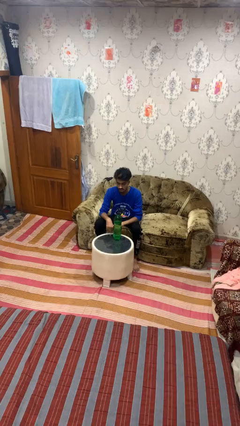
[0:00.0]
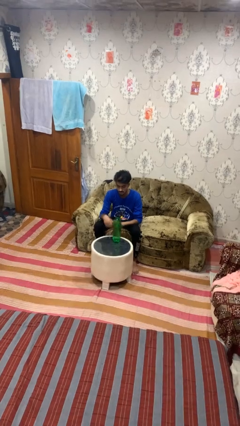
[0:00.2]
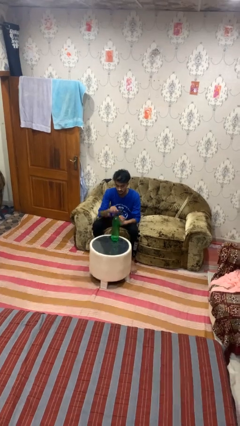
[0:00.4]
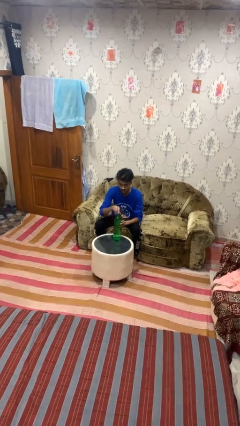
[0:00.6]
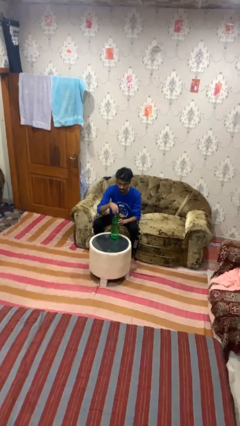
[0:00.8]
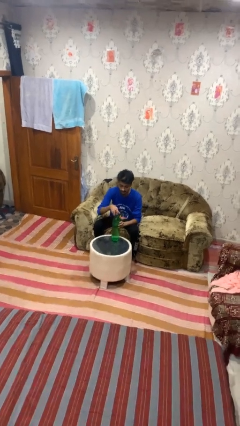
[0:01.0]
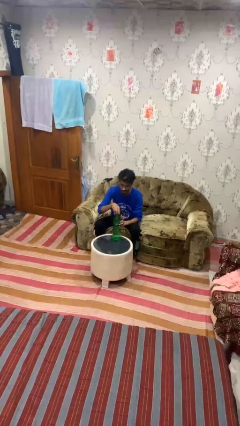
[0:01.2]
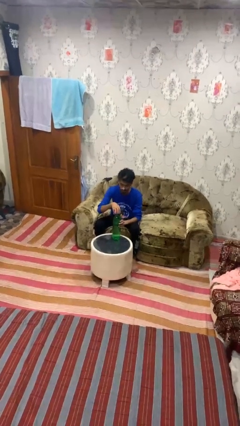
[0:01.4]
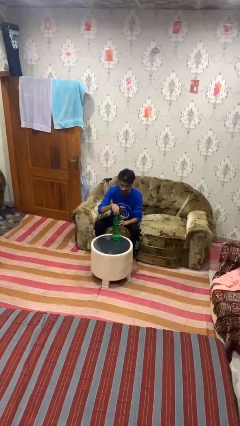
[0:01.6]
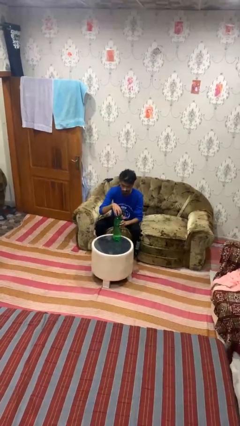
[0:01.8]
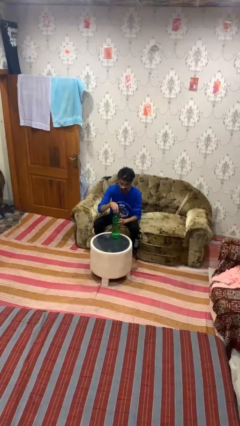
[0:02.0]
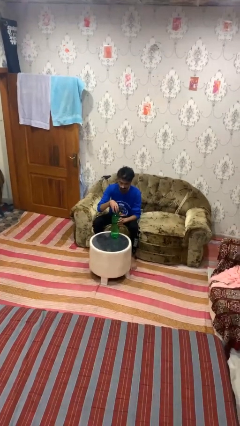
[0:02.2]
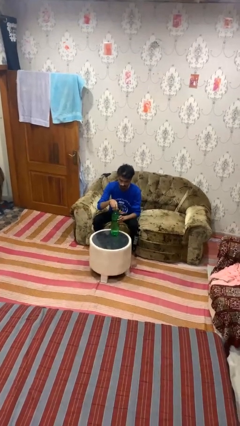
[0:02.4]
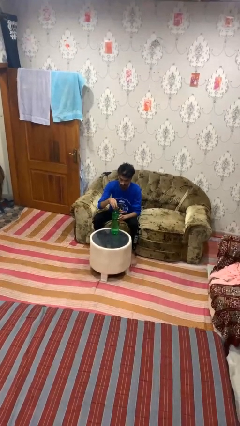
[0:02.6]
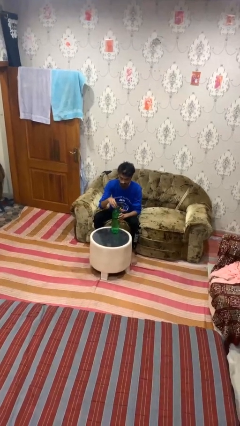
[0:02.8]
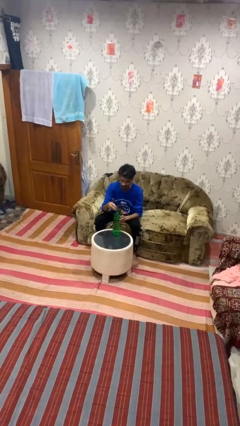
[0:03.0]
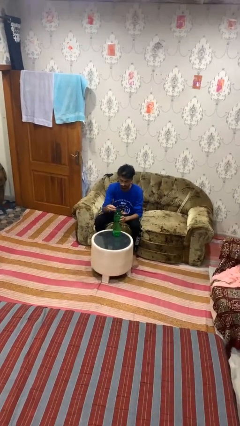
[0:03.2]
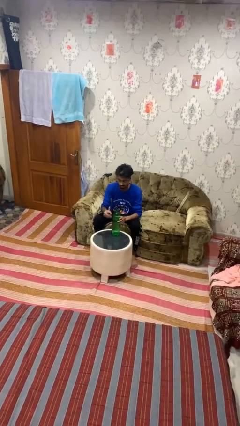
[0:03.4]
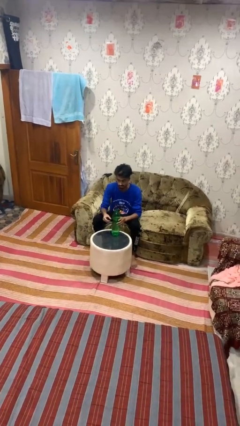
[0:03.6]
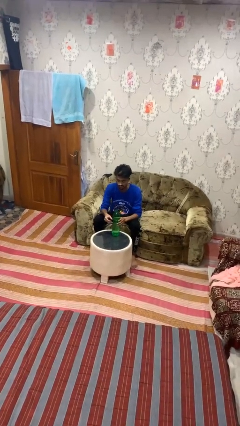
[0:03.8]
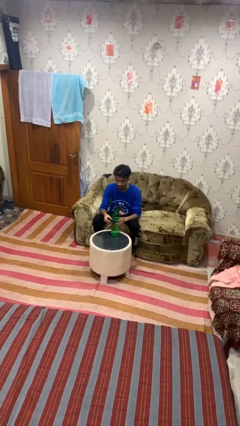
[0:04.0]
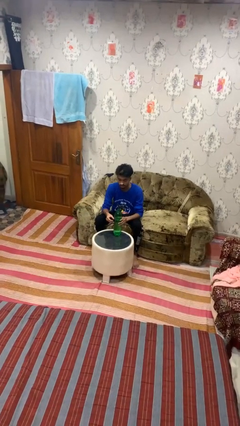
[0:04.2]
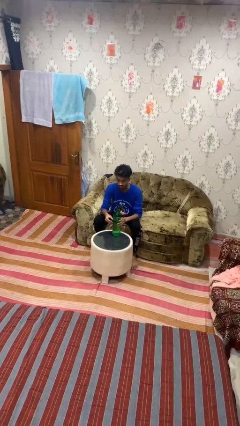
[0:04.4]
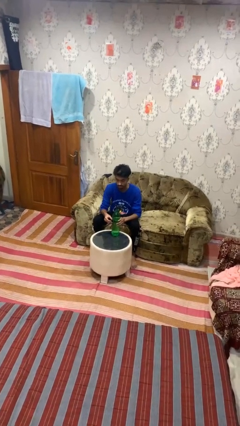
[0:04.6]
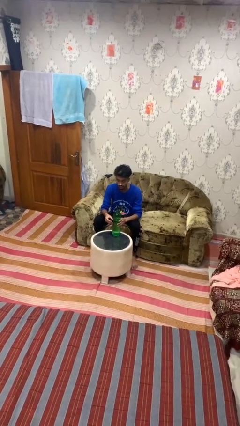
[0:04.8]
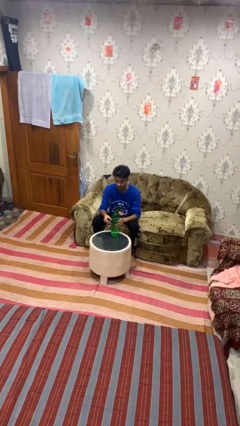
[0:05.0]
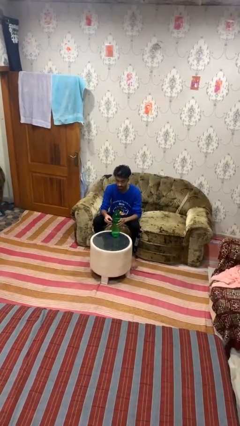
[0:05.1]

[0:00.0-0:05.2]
person unscrews lid from bottle

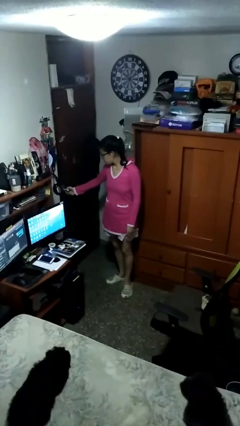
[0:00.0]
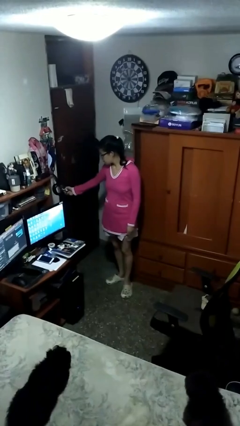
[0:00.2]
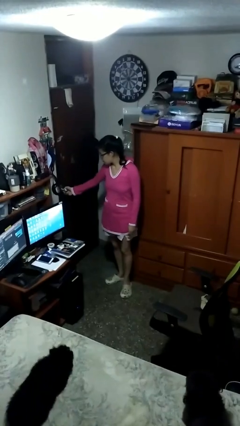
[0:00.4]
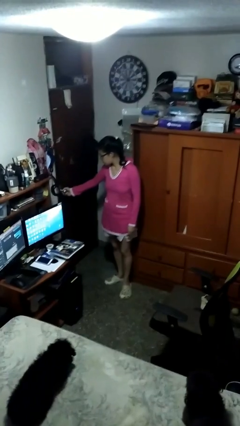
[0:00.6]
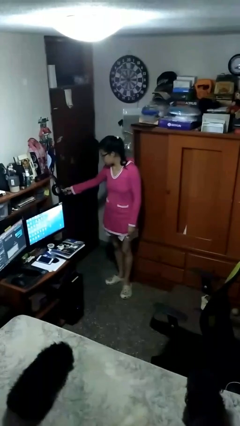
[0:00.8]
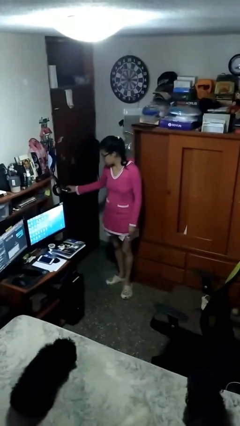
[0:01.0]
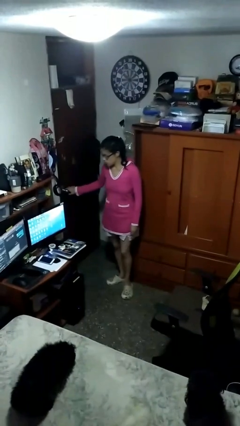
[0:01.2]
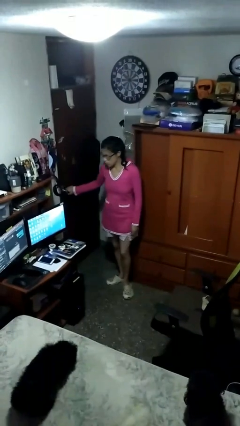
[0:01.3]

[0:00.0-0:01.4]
person closes facility door

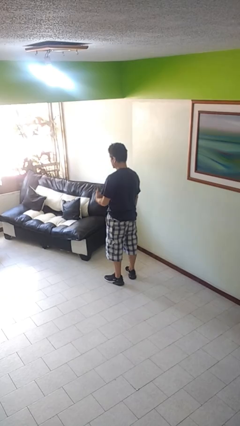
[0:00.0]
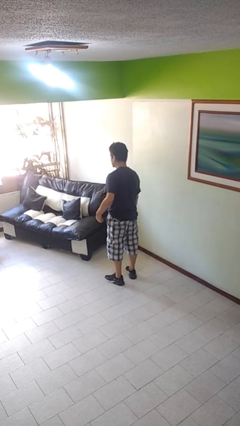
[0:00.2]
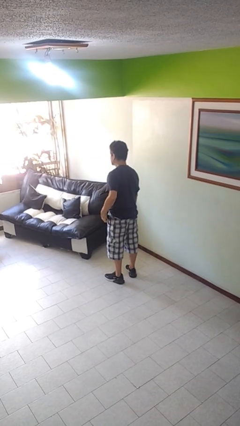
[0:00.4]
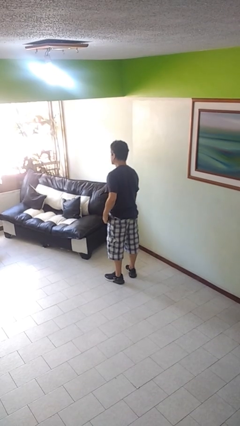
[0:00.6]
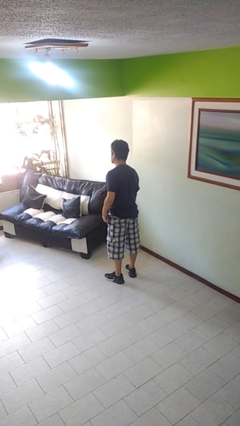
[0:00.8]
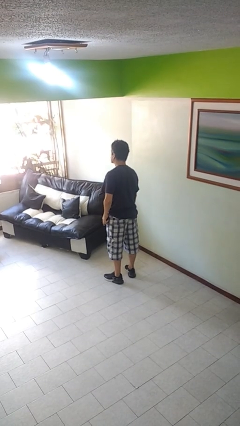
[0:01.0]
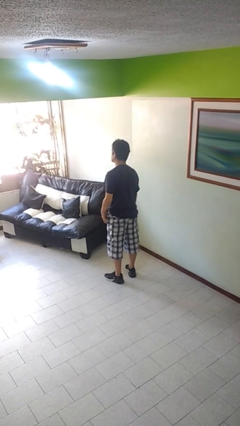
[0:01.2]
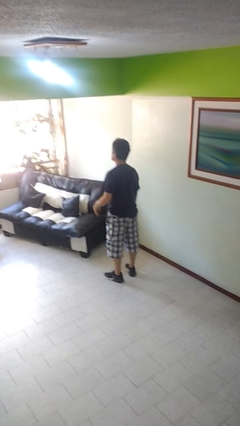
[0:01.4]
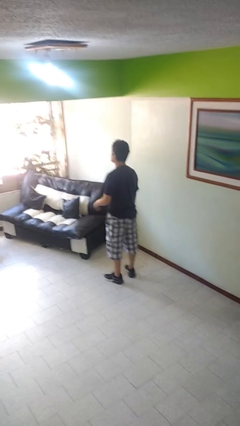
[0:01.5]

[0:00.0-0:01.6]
person puts phone into pocket

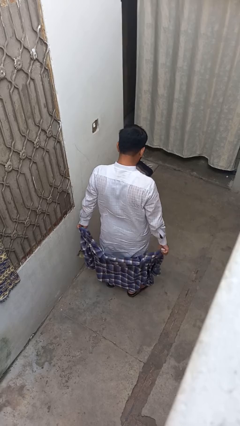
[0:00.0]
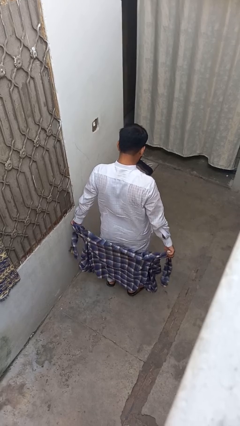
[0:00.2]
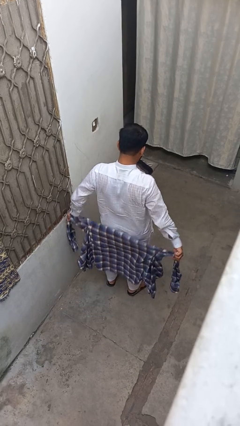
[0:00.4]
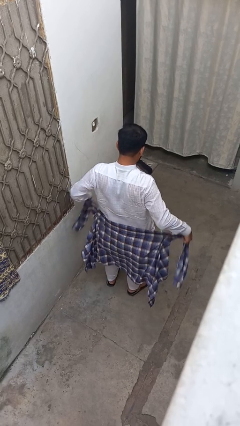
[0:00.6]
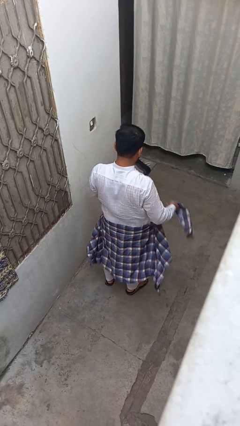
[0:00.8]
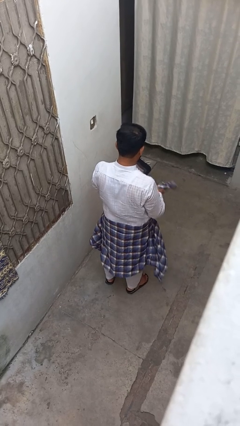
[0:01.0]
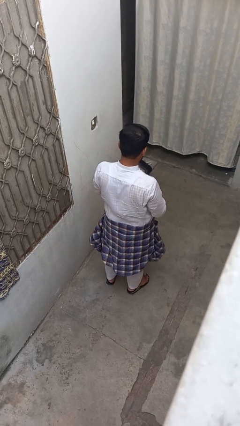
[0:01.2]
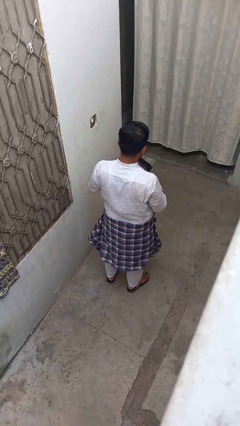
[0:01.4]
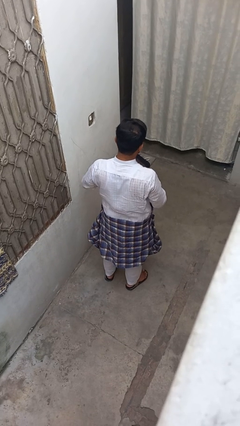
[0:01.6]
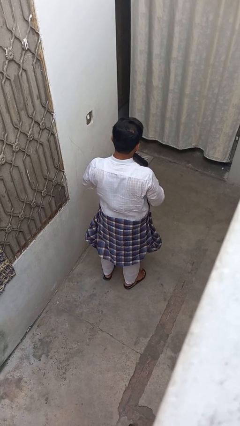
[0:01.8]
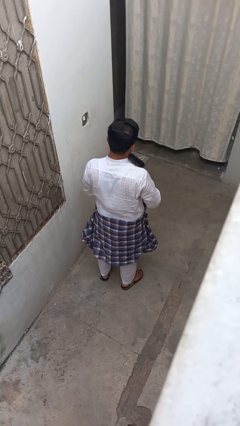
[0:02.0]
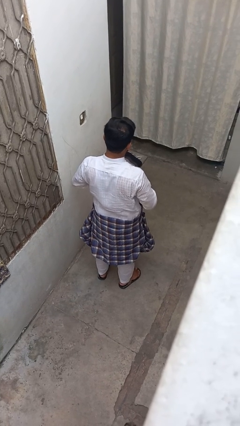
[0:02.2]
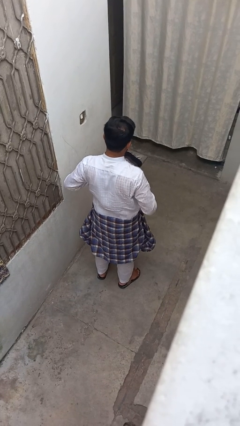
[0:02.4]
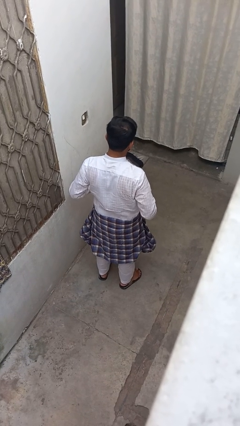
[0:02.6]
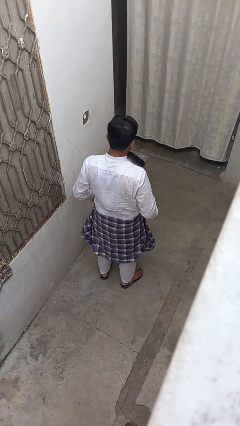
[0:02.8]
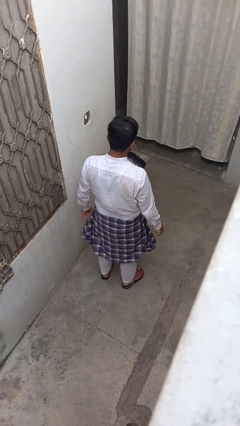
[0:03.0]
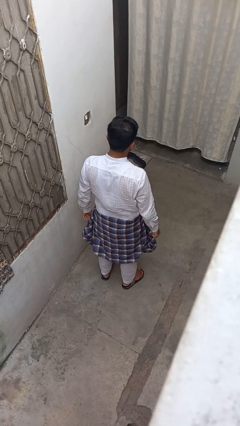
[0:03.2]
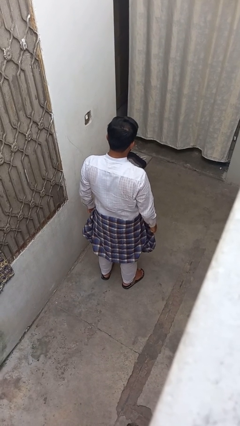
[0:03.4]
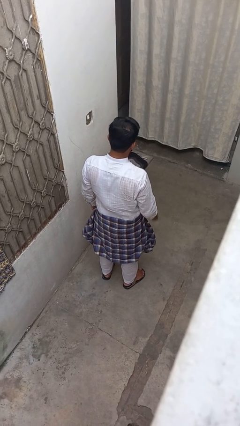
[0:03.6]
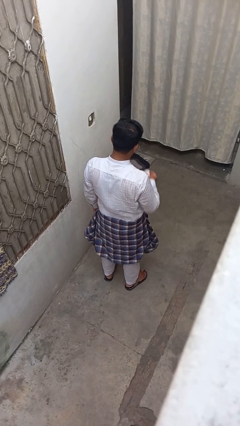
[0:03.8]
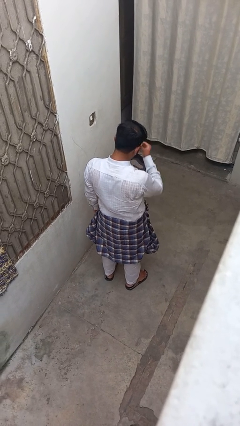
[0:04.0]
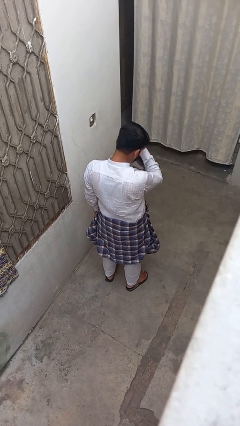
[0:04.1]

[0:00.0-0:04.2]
person ties jacket around waist

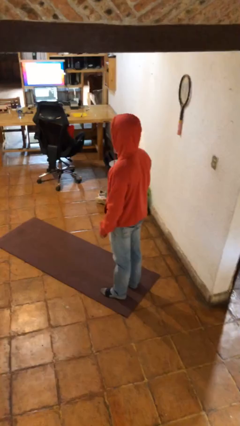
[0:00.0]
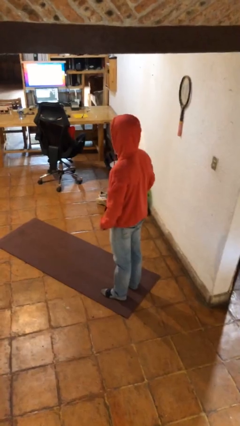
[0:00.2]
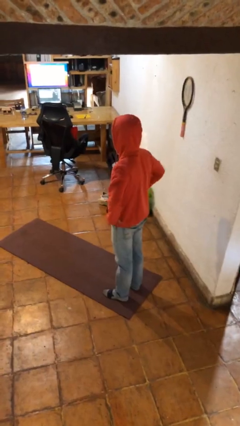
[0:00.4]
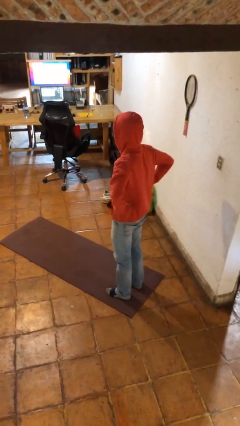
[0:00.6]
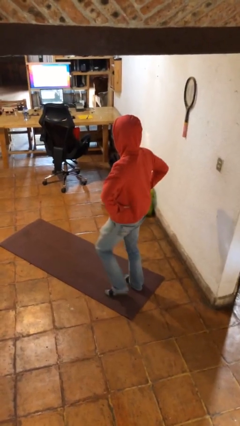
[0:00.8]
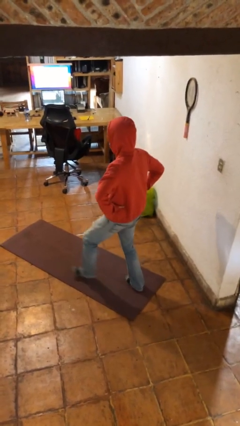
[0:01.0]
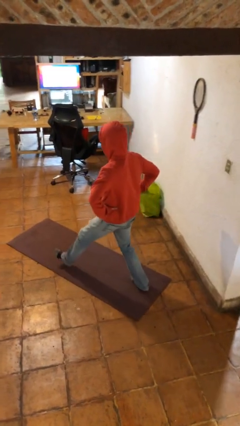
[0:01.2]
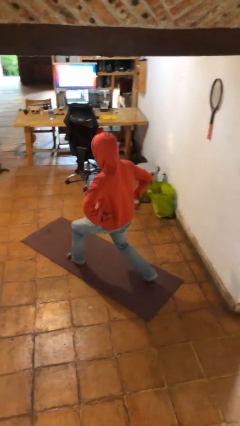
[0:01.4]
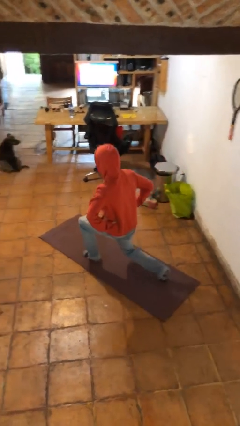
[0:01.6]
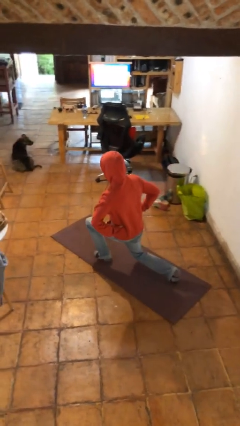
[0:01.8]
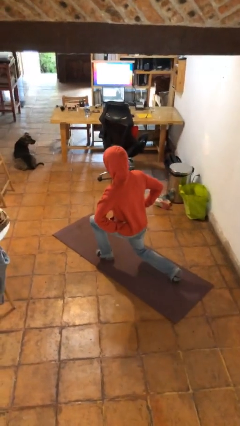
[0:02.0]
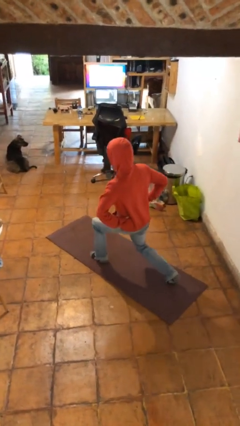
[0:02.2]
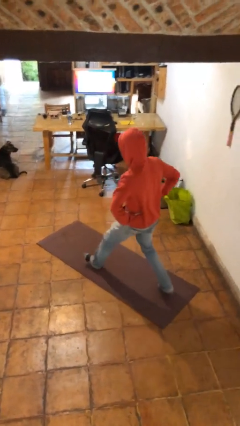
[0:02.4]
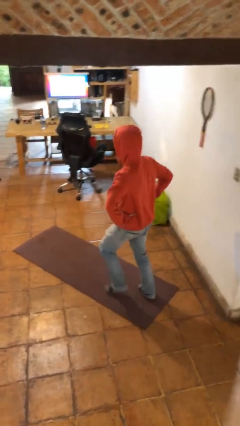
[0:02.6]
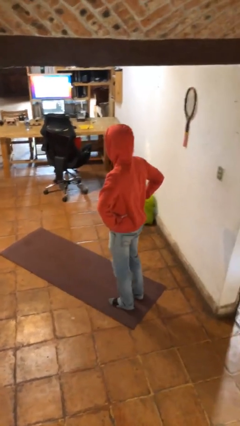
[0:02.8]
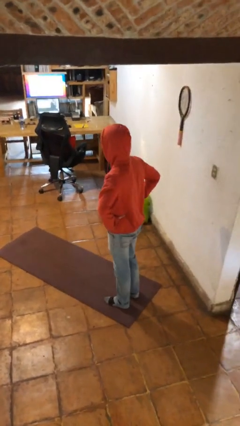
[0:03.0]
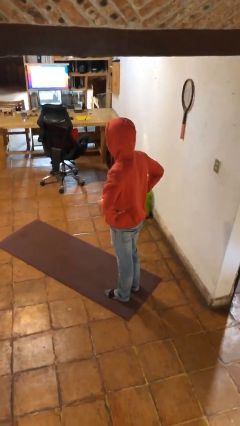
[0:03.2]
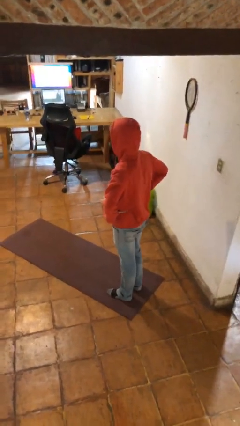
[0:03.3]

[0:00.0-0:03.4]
person exercises with lunges

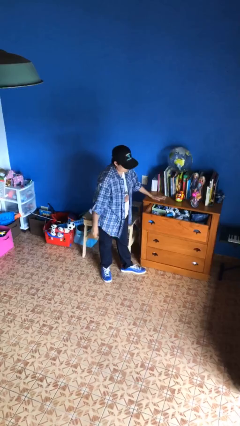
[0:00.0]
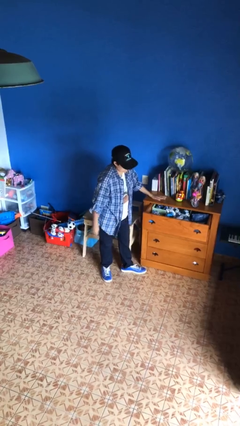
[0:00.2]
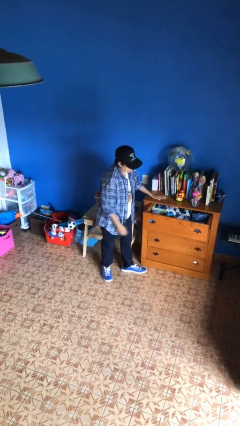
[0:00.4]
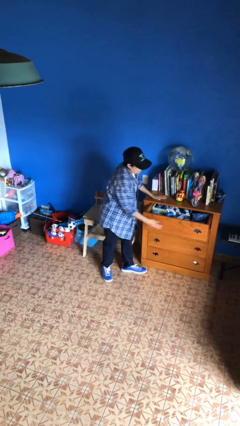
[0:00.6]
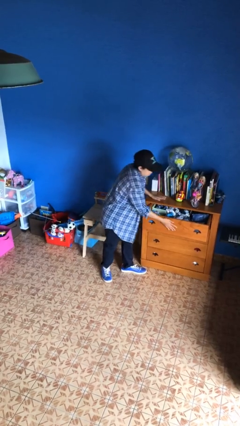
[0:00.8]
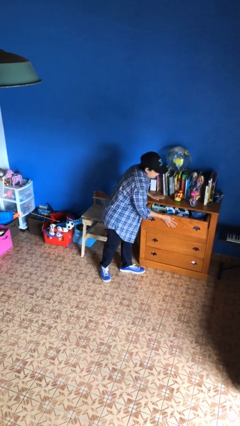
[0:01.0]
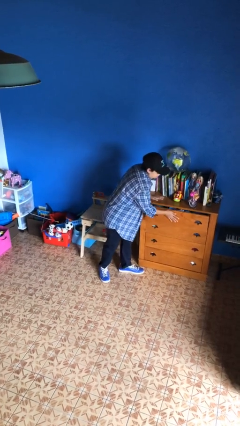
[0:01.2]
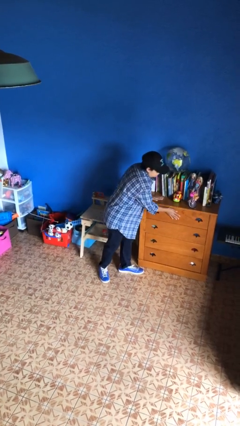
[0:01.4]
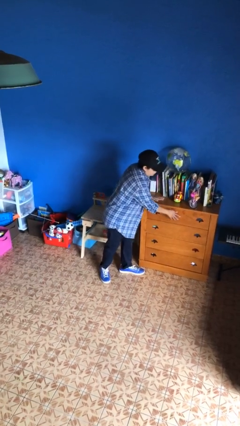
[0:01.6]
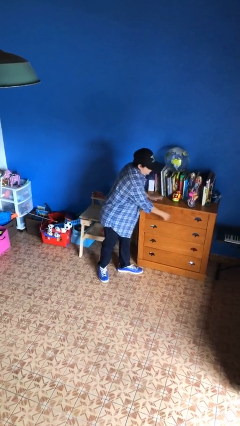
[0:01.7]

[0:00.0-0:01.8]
person closes dresser drawer
